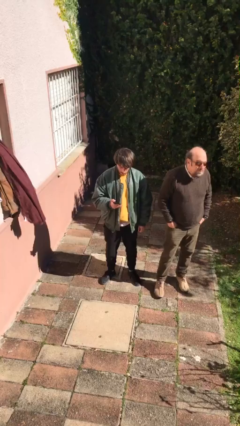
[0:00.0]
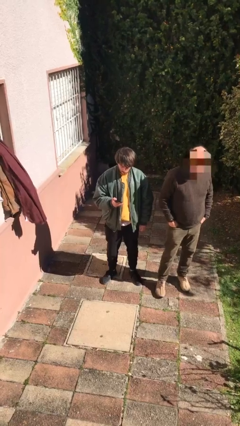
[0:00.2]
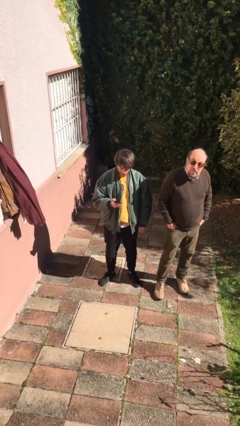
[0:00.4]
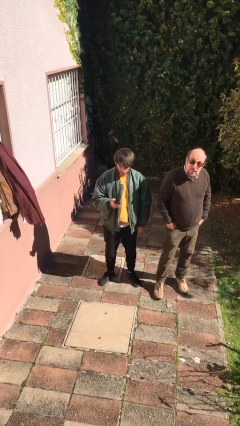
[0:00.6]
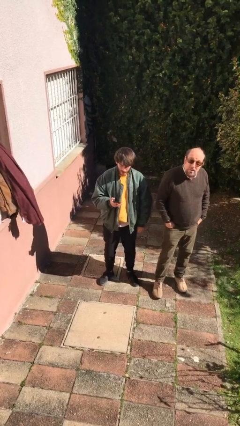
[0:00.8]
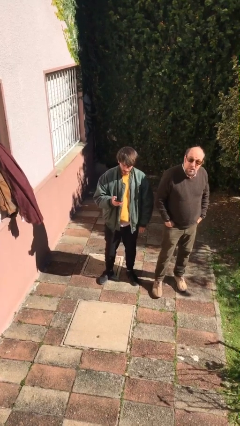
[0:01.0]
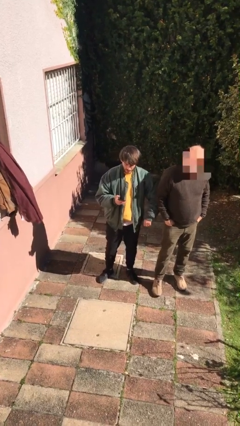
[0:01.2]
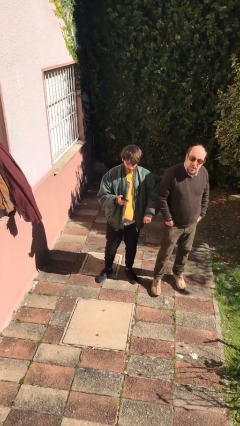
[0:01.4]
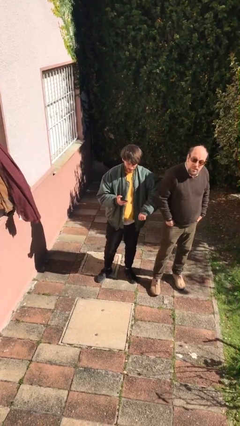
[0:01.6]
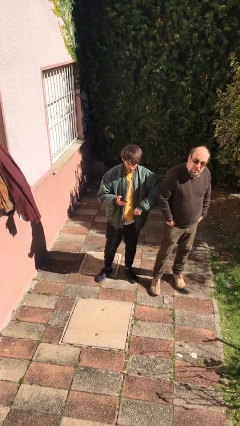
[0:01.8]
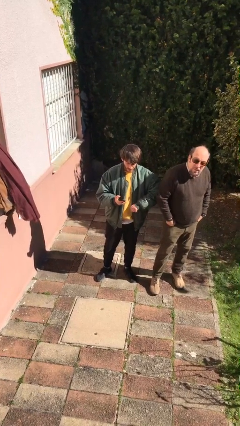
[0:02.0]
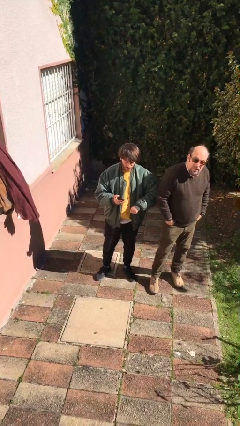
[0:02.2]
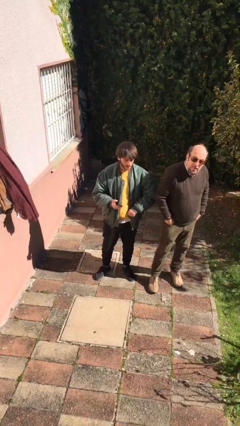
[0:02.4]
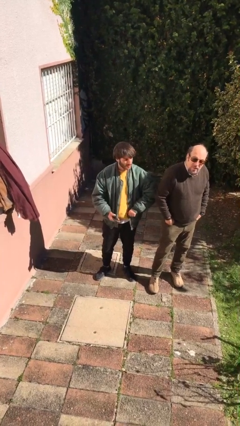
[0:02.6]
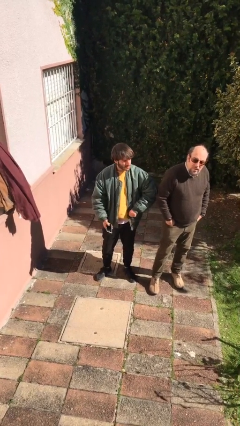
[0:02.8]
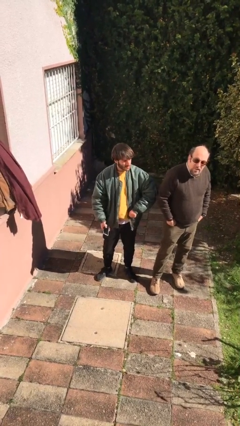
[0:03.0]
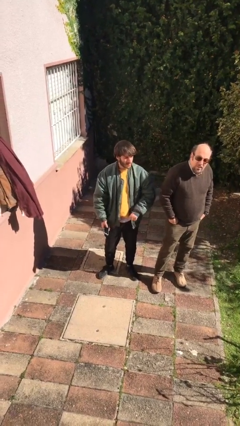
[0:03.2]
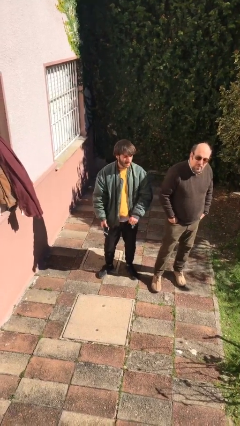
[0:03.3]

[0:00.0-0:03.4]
person nudges person with elbow

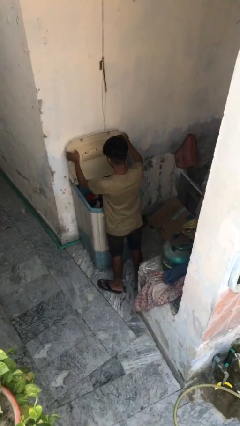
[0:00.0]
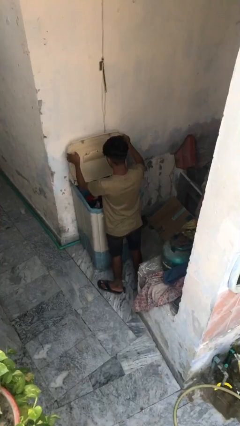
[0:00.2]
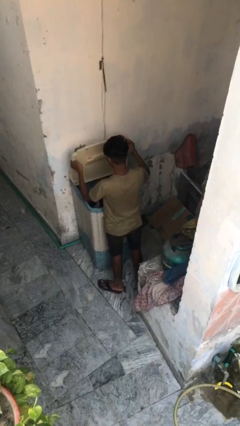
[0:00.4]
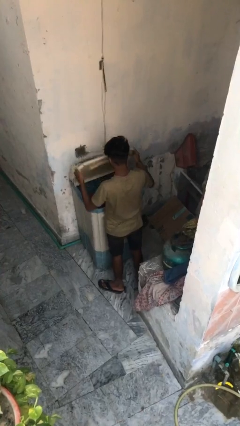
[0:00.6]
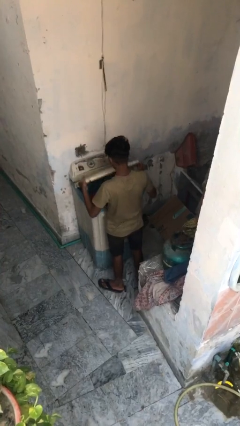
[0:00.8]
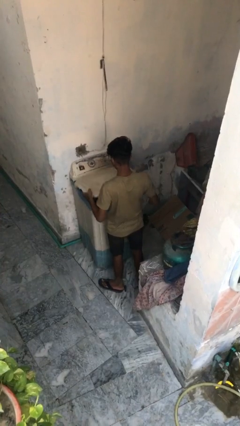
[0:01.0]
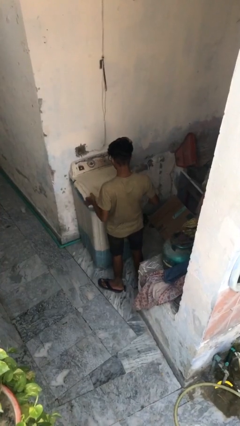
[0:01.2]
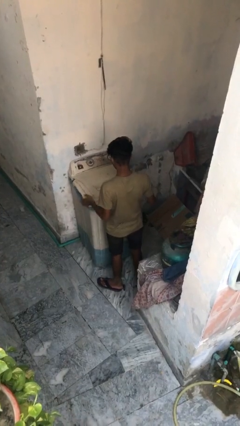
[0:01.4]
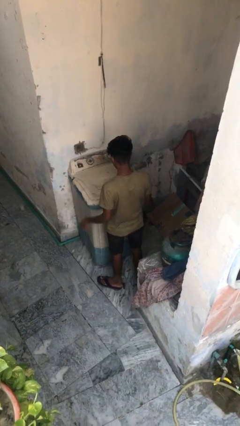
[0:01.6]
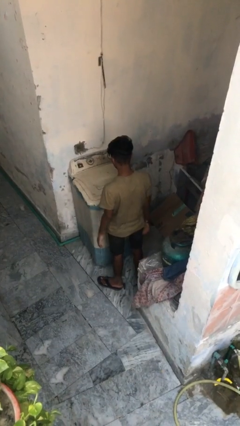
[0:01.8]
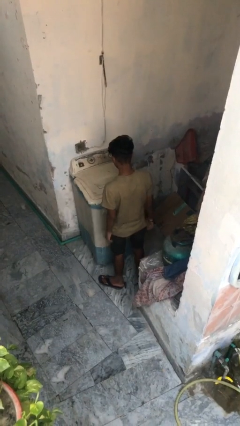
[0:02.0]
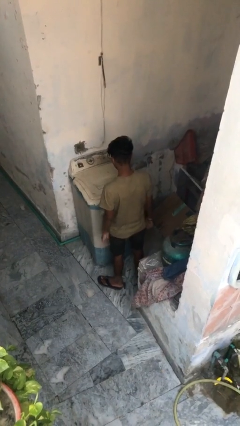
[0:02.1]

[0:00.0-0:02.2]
person closes clothes washer

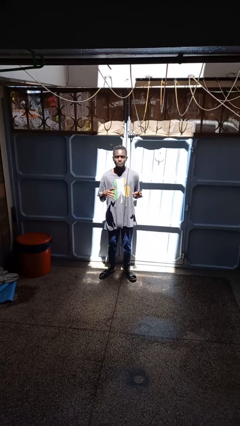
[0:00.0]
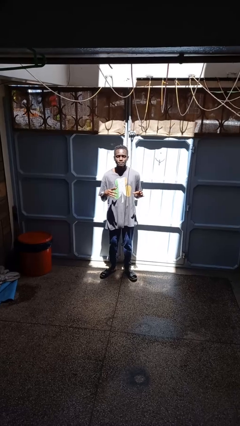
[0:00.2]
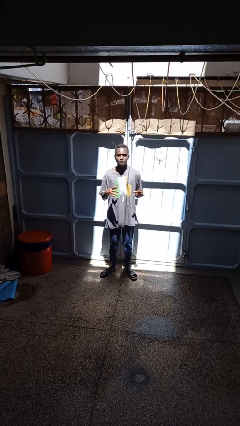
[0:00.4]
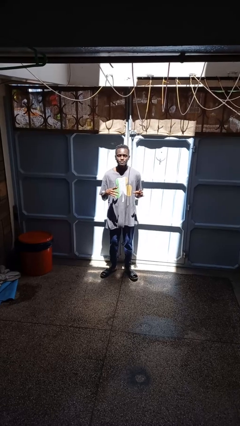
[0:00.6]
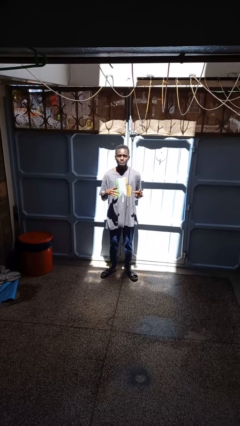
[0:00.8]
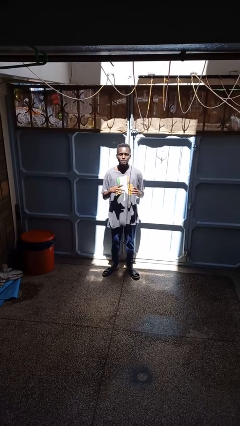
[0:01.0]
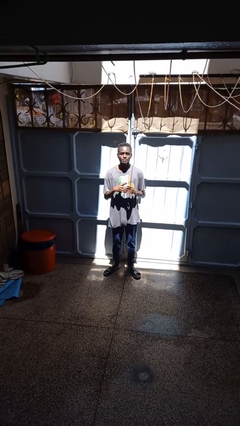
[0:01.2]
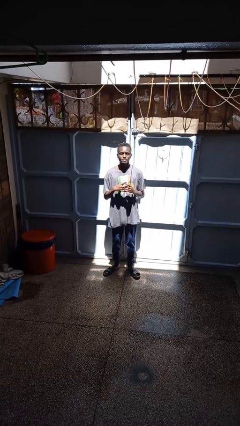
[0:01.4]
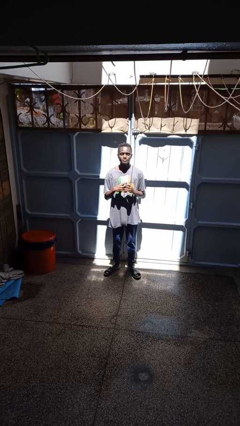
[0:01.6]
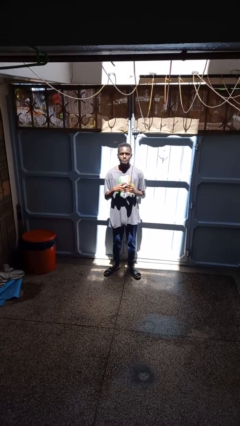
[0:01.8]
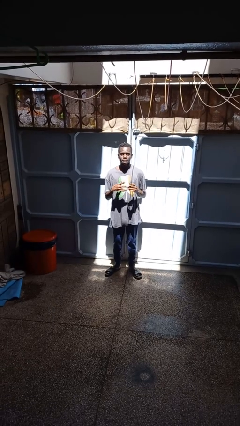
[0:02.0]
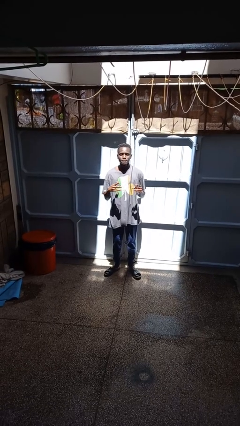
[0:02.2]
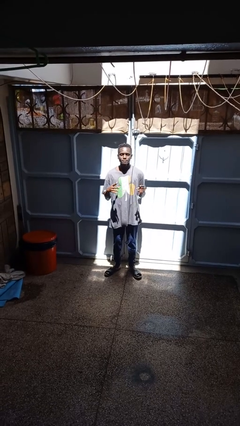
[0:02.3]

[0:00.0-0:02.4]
person takes off ring

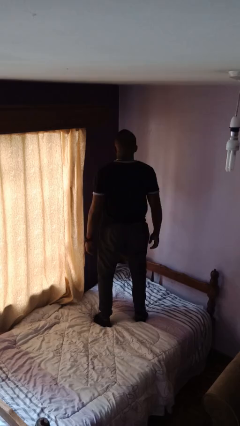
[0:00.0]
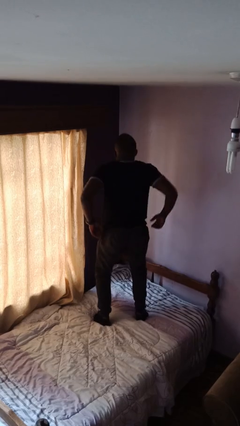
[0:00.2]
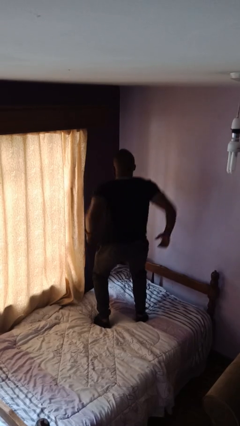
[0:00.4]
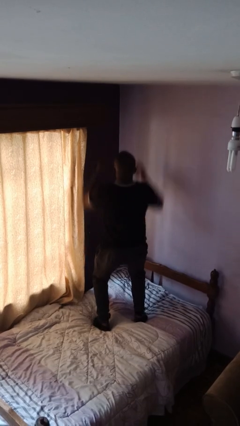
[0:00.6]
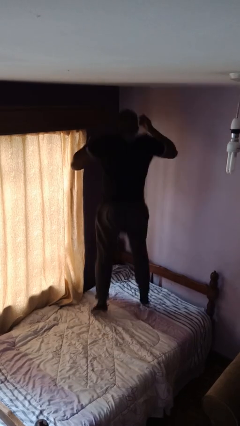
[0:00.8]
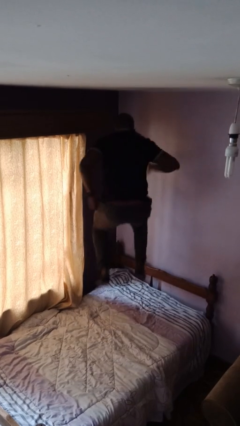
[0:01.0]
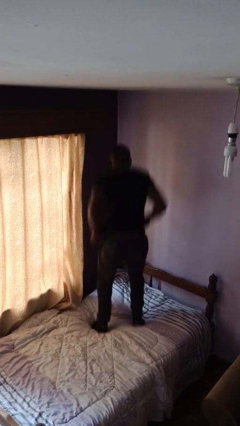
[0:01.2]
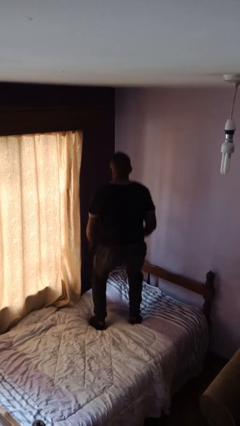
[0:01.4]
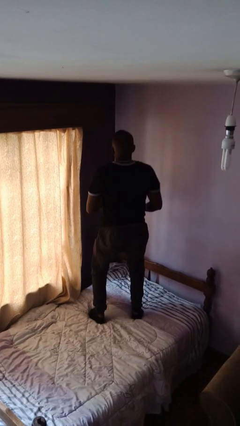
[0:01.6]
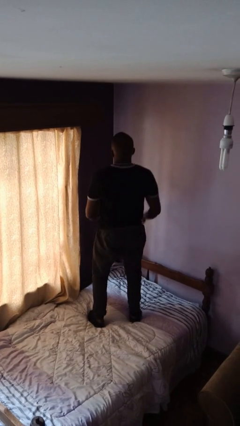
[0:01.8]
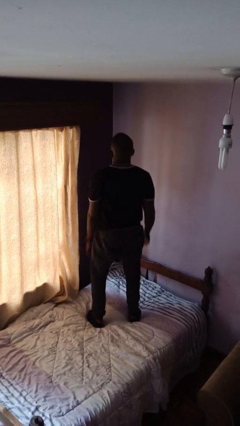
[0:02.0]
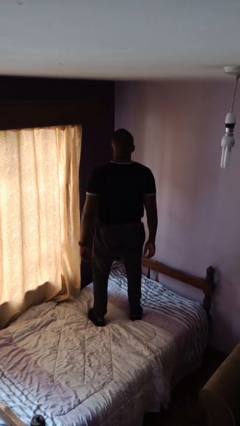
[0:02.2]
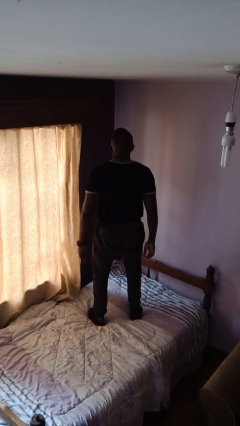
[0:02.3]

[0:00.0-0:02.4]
person jumps on bed

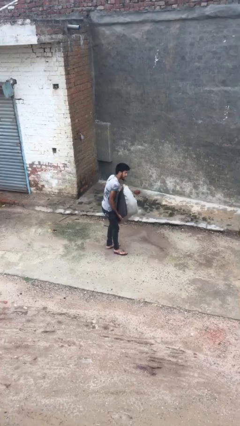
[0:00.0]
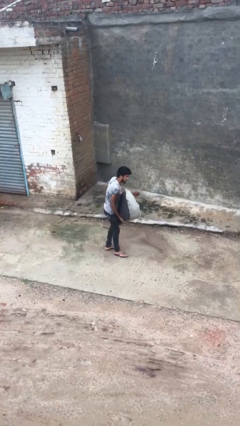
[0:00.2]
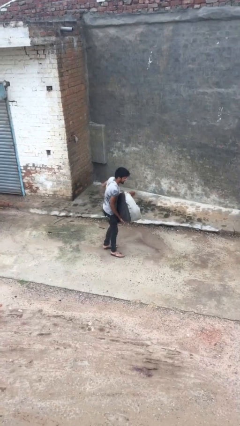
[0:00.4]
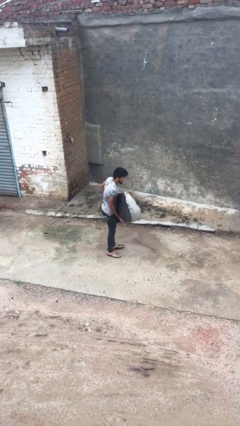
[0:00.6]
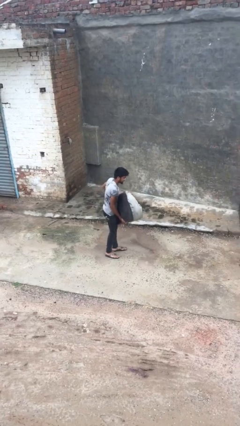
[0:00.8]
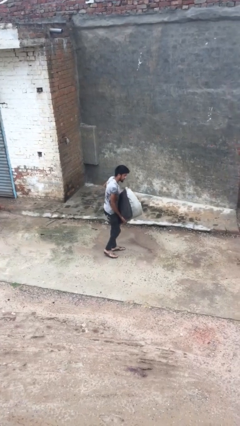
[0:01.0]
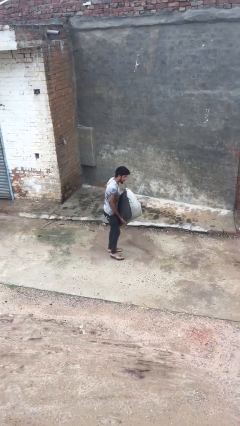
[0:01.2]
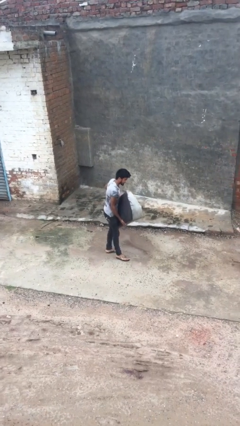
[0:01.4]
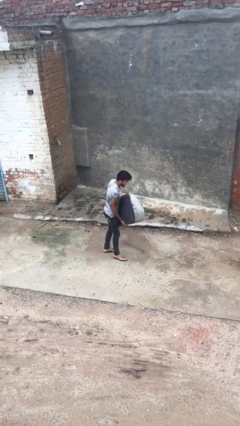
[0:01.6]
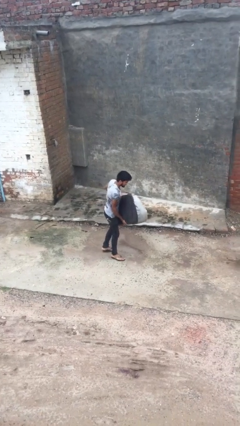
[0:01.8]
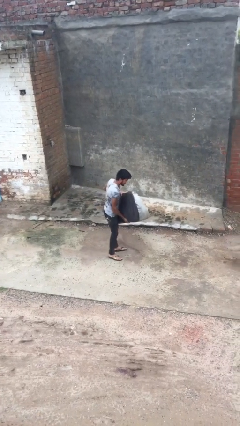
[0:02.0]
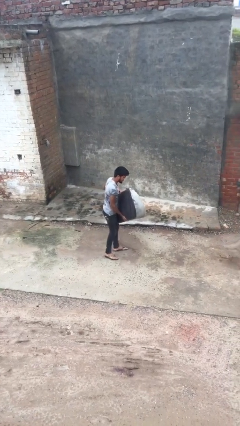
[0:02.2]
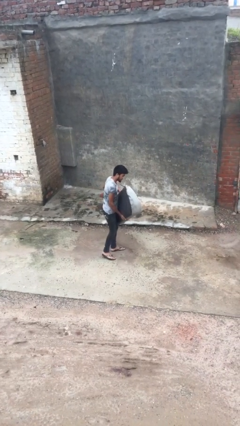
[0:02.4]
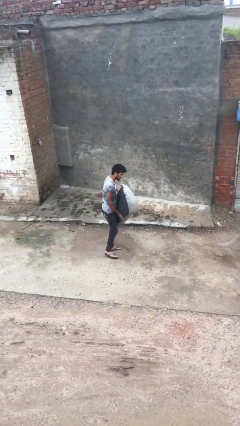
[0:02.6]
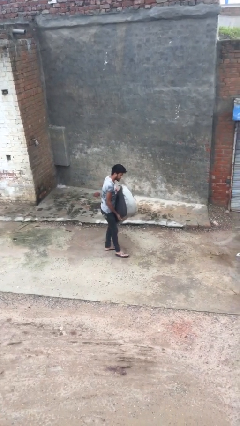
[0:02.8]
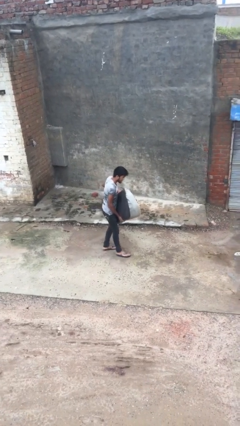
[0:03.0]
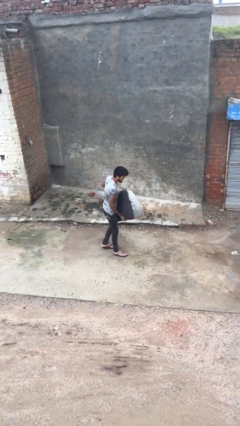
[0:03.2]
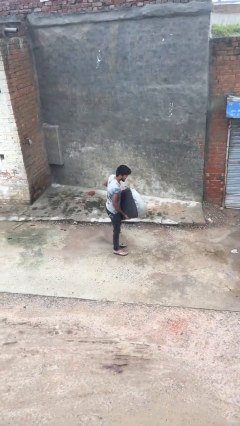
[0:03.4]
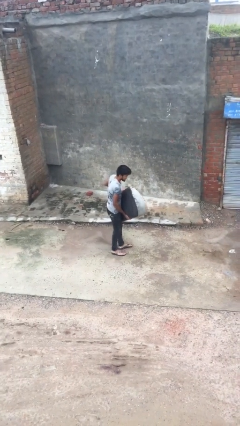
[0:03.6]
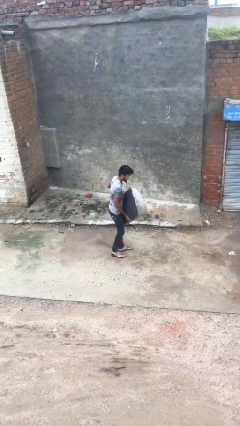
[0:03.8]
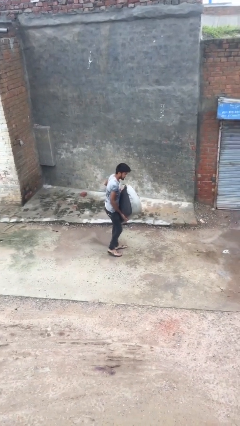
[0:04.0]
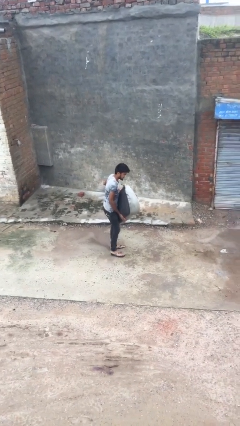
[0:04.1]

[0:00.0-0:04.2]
person carries heavy object

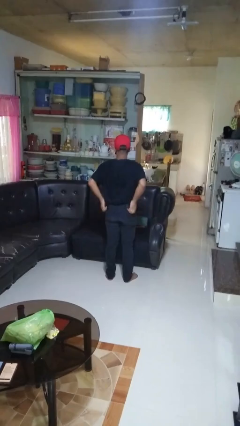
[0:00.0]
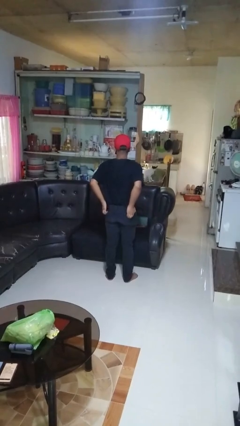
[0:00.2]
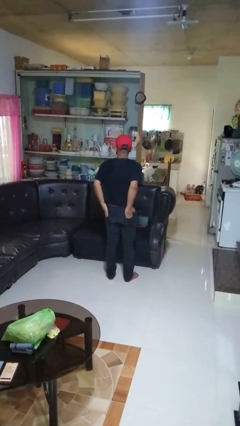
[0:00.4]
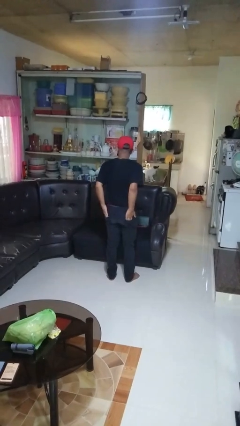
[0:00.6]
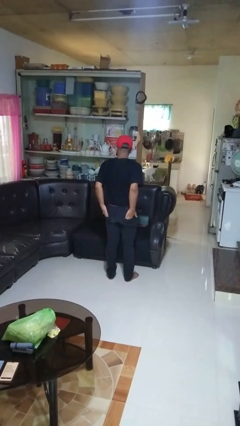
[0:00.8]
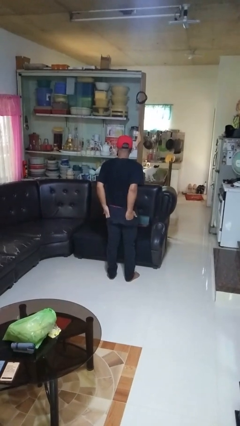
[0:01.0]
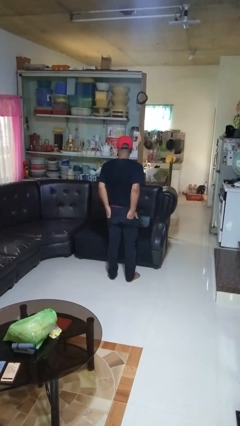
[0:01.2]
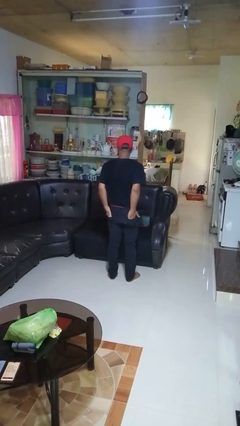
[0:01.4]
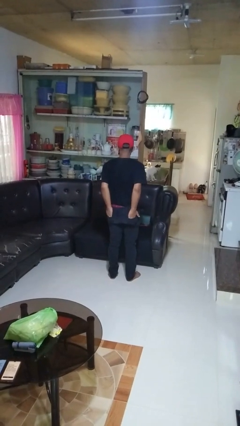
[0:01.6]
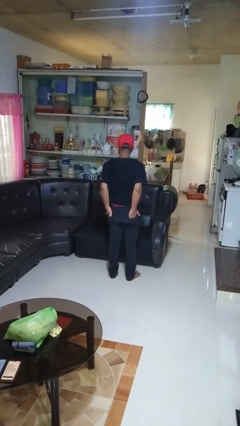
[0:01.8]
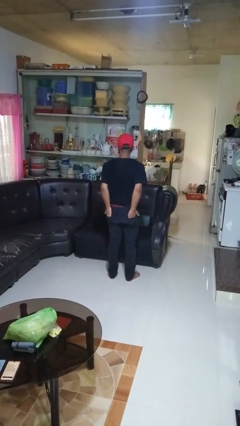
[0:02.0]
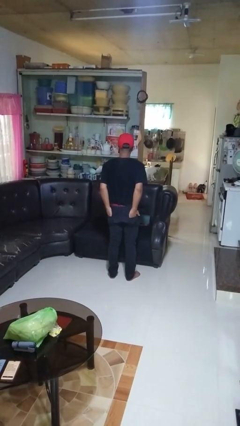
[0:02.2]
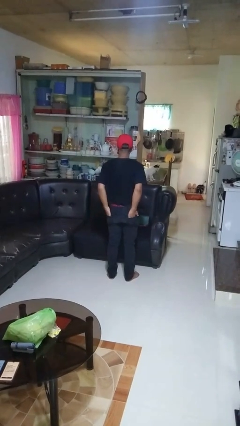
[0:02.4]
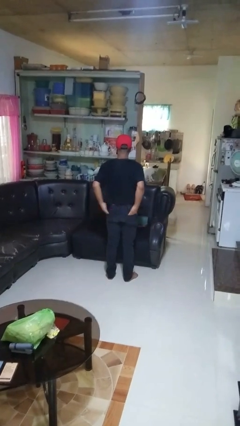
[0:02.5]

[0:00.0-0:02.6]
person puts hands in back pockets
